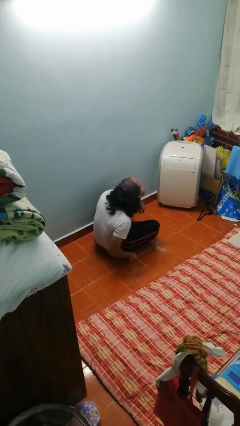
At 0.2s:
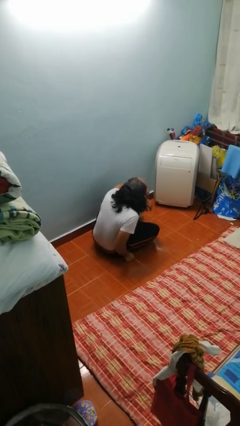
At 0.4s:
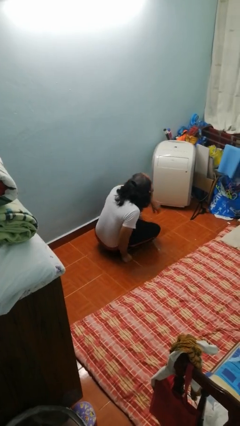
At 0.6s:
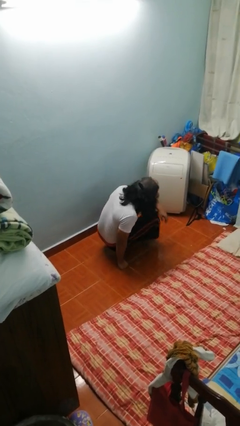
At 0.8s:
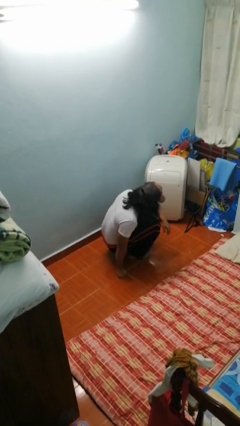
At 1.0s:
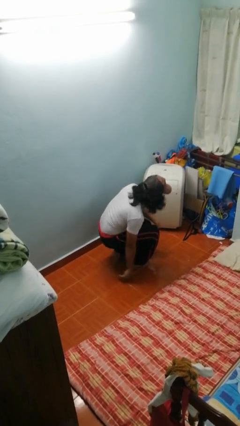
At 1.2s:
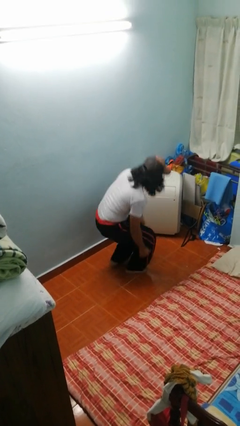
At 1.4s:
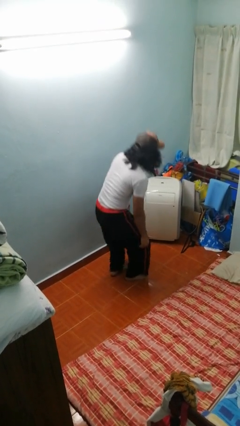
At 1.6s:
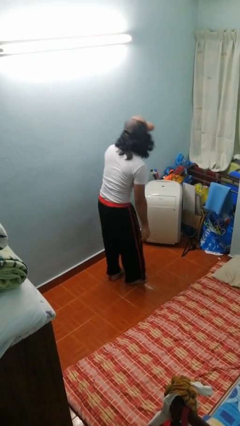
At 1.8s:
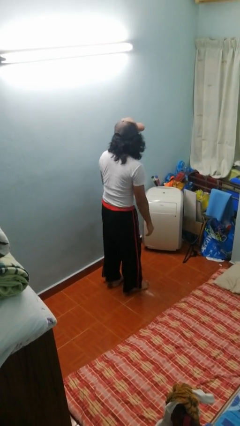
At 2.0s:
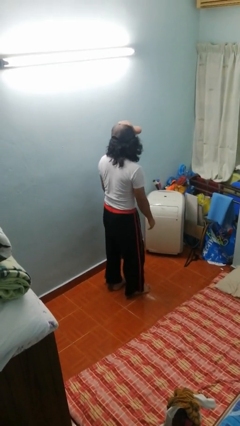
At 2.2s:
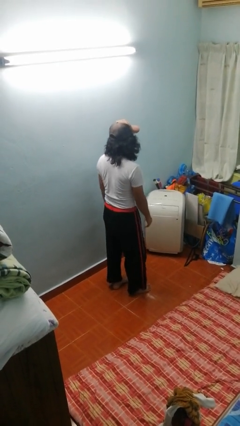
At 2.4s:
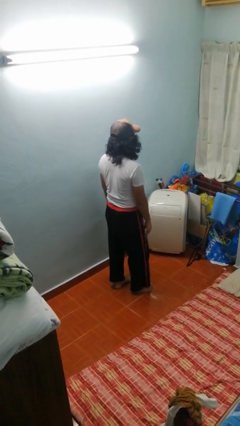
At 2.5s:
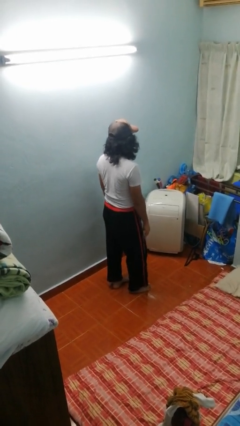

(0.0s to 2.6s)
person stands up from floor

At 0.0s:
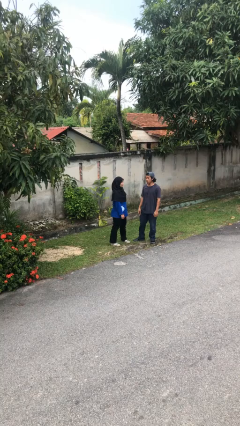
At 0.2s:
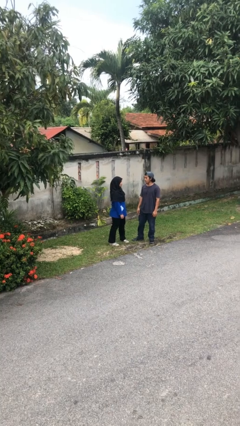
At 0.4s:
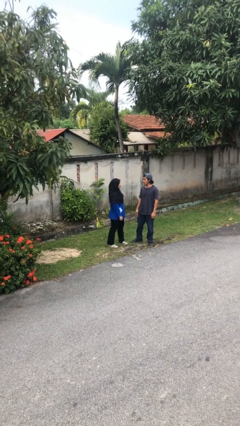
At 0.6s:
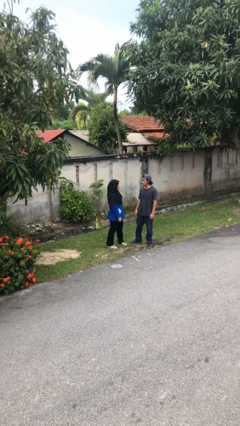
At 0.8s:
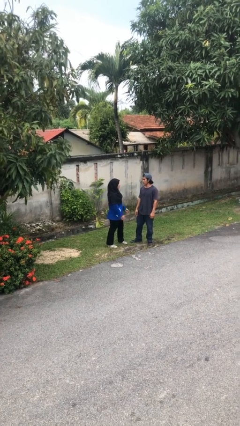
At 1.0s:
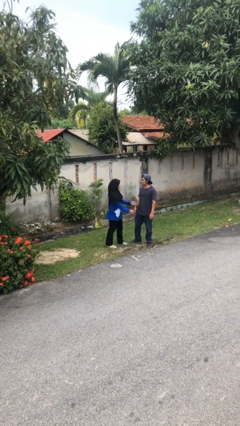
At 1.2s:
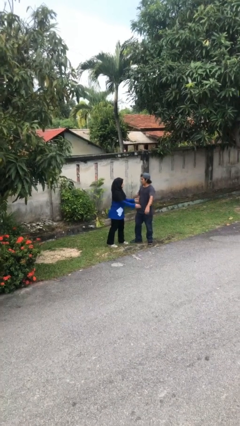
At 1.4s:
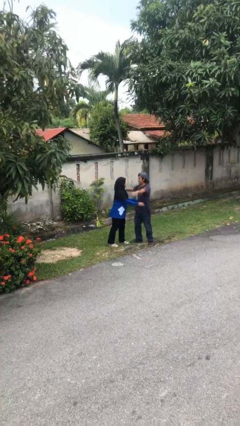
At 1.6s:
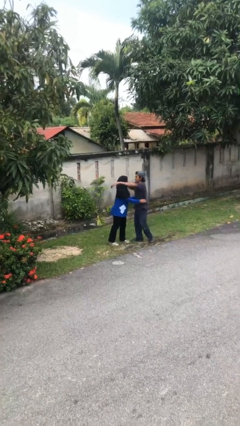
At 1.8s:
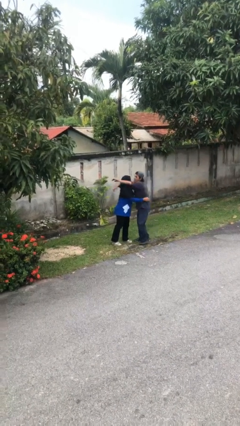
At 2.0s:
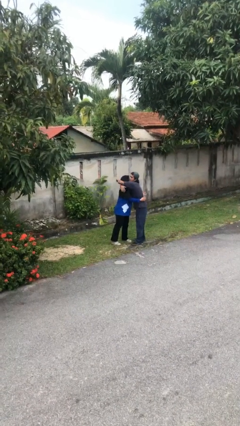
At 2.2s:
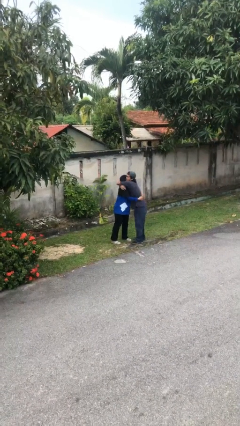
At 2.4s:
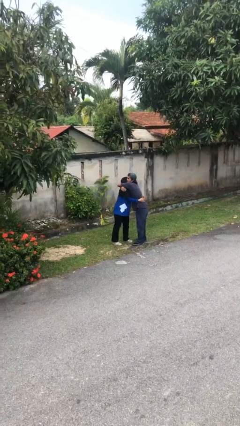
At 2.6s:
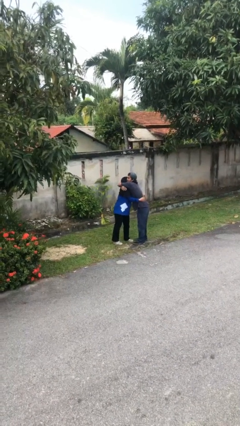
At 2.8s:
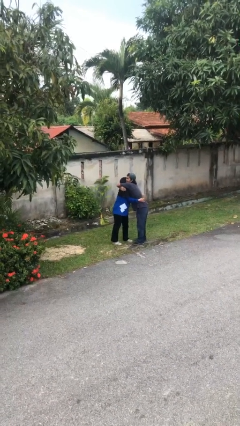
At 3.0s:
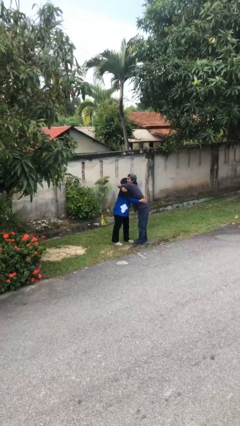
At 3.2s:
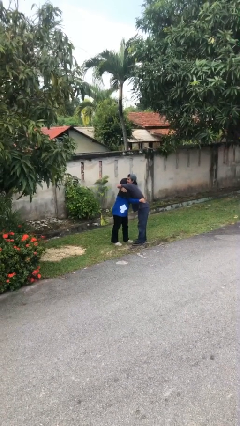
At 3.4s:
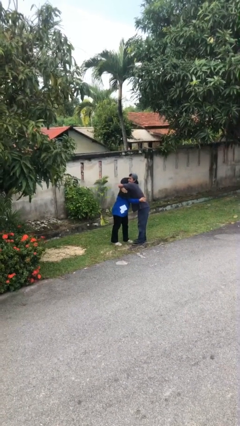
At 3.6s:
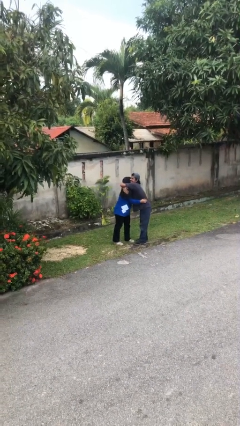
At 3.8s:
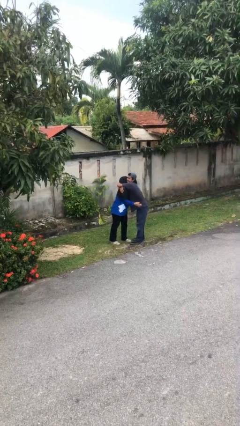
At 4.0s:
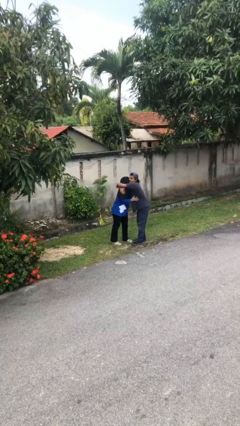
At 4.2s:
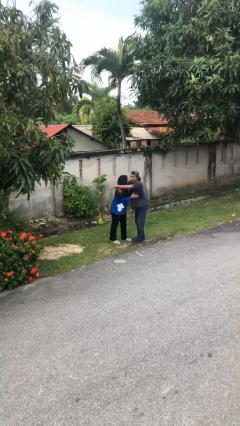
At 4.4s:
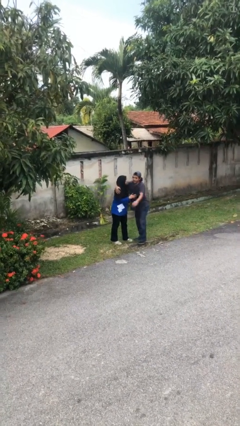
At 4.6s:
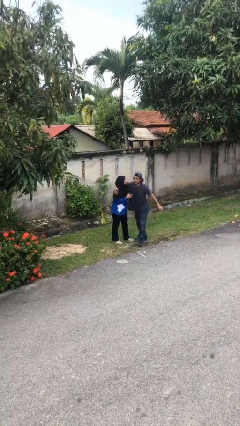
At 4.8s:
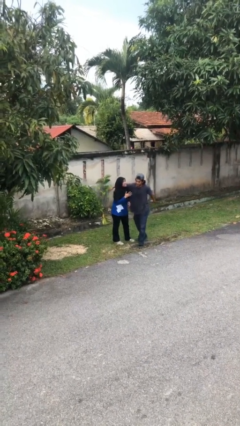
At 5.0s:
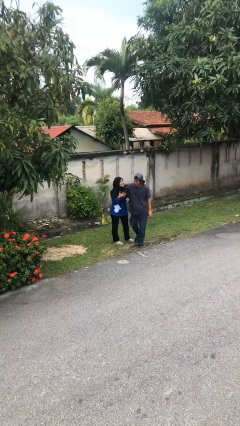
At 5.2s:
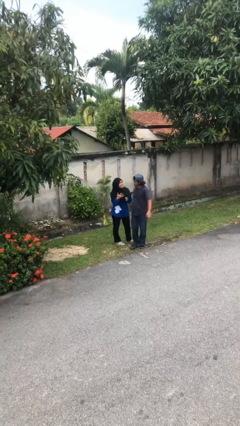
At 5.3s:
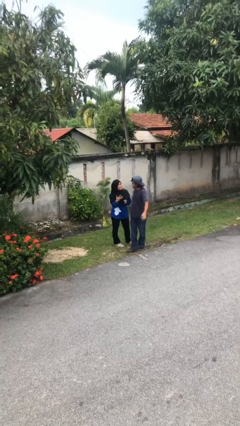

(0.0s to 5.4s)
person embraces person

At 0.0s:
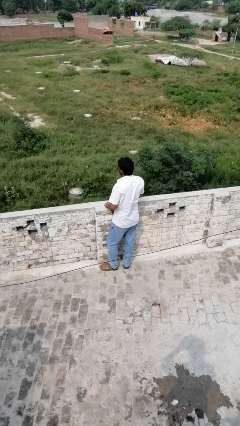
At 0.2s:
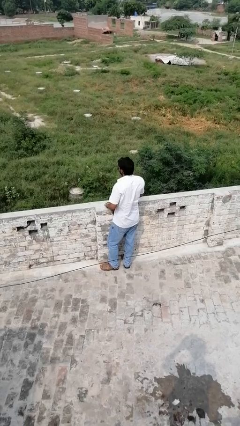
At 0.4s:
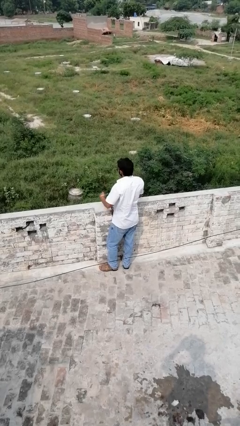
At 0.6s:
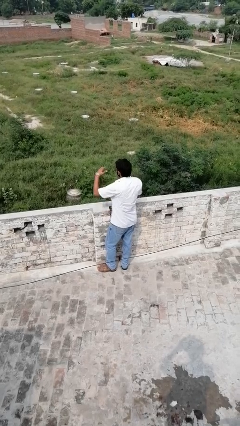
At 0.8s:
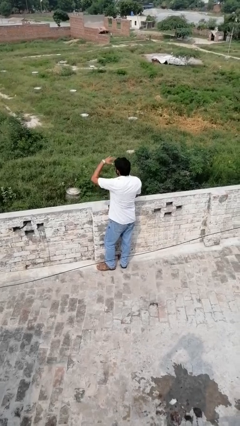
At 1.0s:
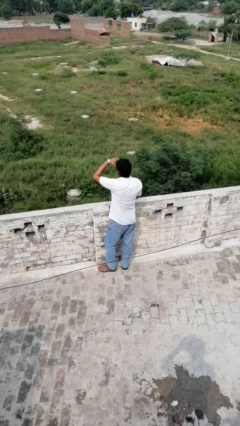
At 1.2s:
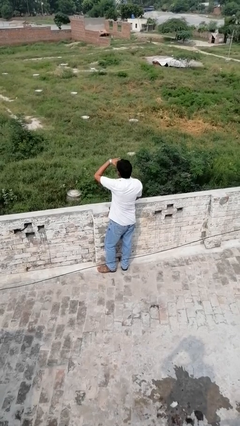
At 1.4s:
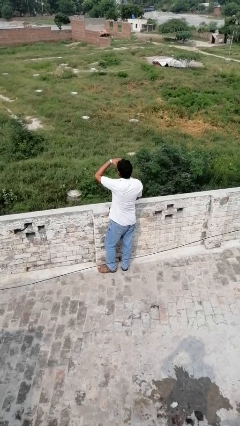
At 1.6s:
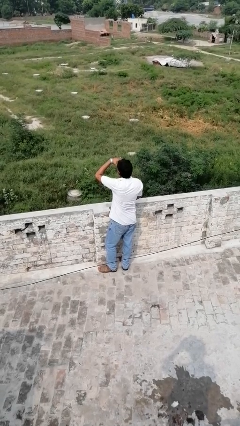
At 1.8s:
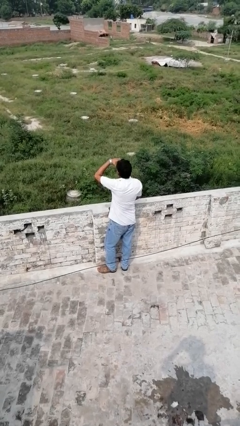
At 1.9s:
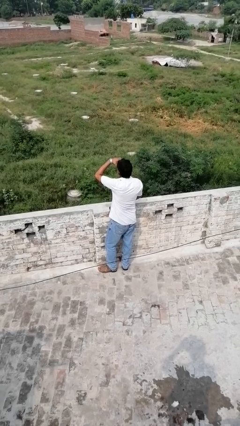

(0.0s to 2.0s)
person shades eyes

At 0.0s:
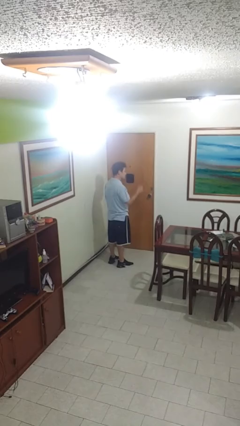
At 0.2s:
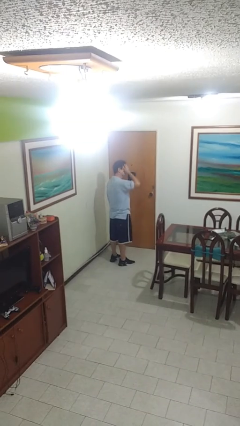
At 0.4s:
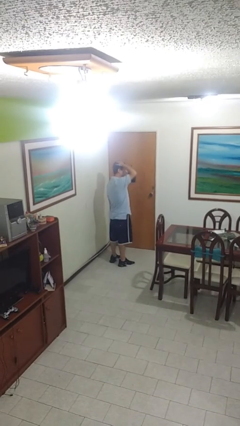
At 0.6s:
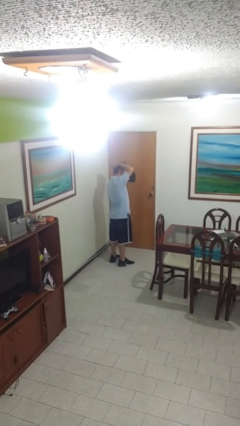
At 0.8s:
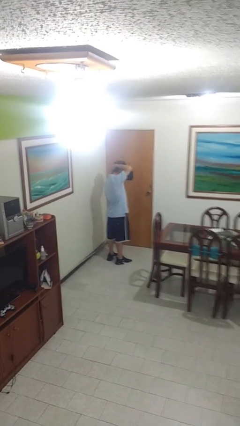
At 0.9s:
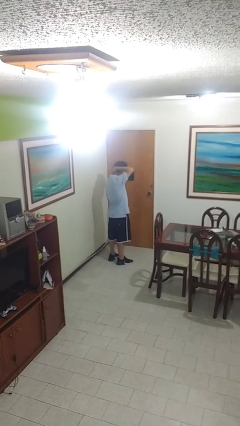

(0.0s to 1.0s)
person strokes hair

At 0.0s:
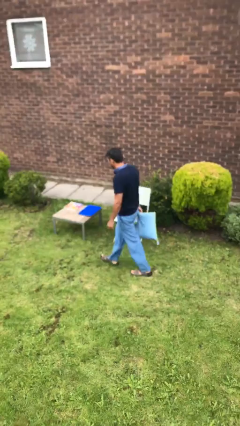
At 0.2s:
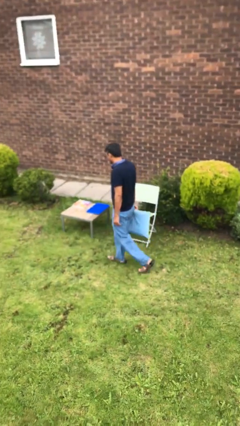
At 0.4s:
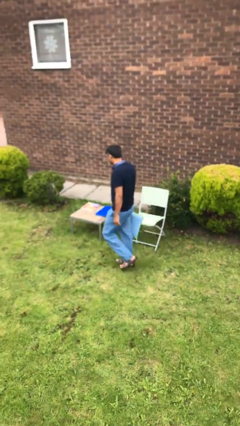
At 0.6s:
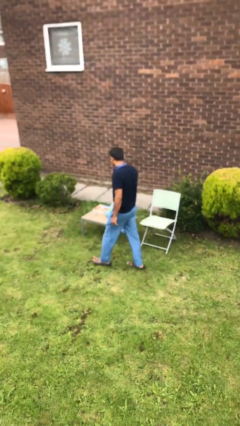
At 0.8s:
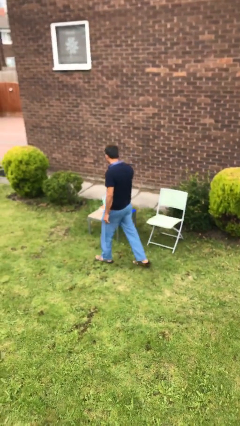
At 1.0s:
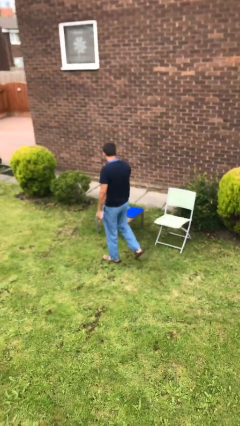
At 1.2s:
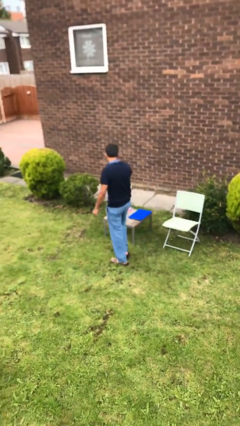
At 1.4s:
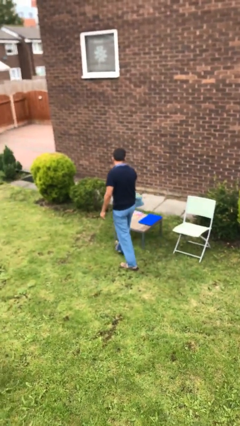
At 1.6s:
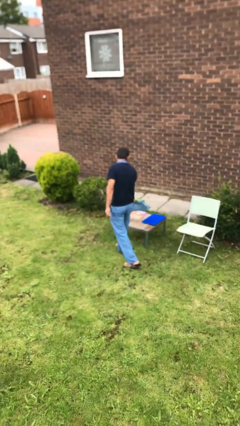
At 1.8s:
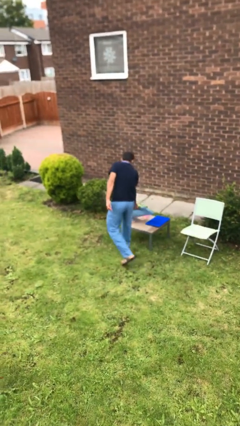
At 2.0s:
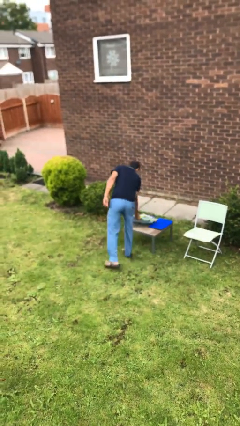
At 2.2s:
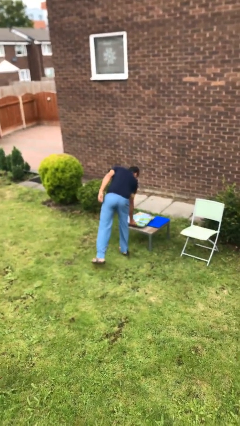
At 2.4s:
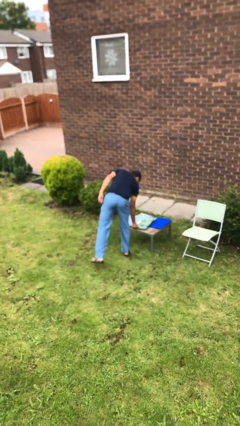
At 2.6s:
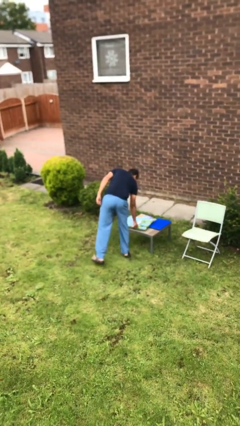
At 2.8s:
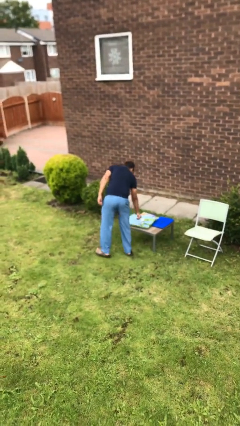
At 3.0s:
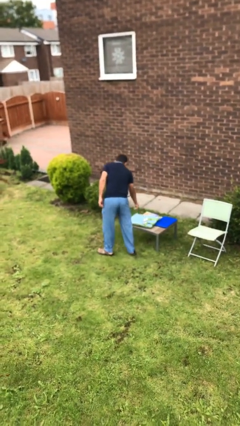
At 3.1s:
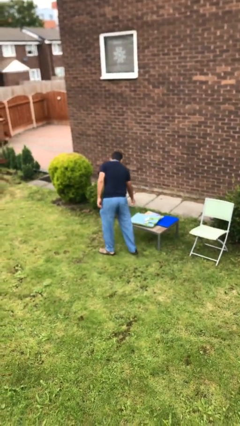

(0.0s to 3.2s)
person puts down object on table

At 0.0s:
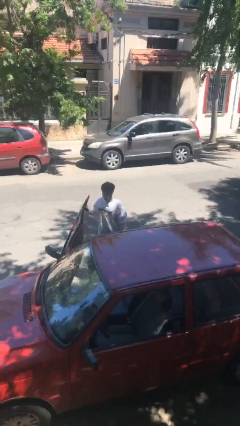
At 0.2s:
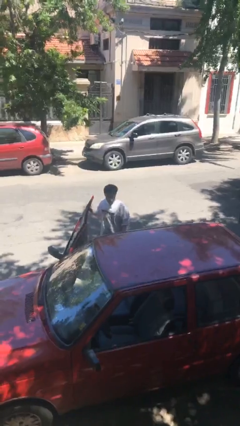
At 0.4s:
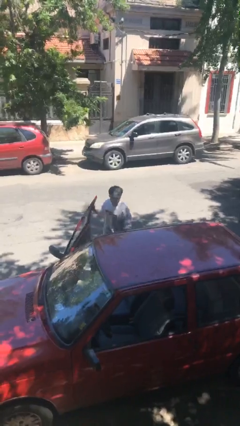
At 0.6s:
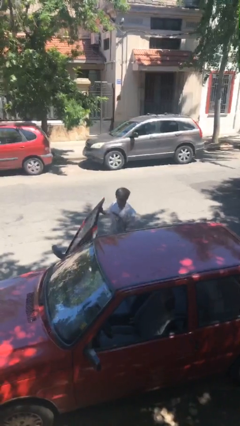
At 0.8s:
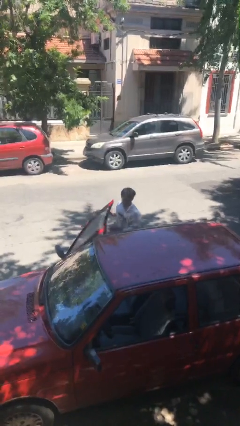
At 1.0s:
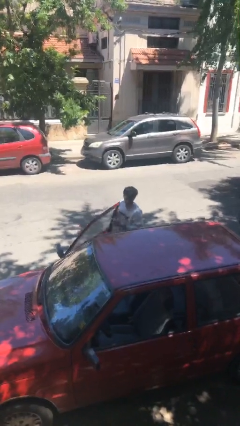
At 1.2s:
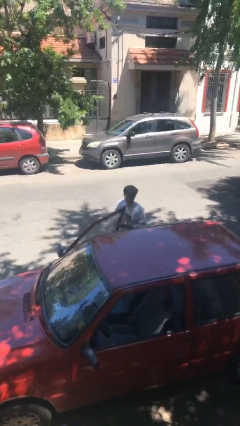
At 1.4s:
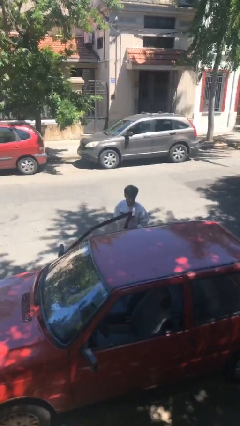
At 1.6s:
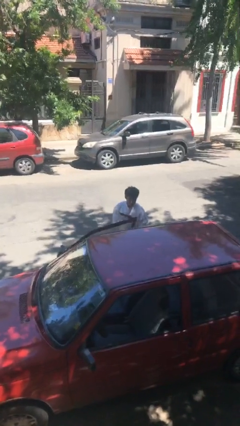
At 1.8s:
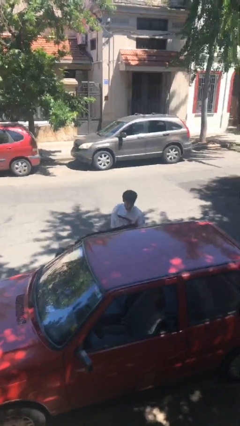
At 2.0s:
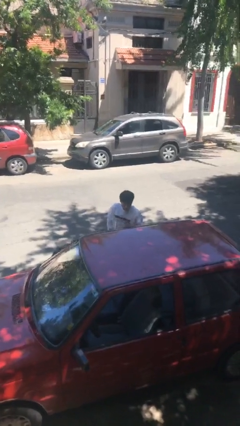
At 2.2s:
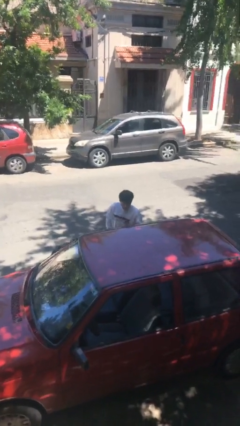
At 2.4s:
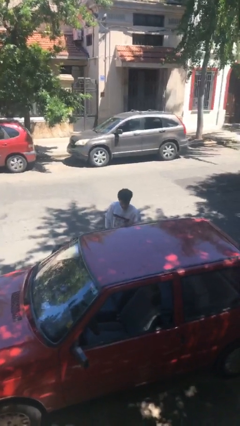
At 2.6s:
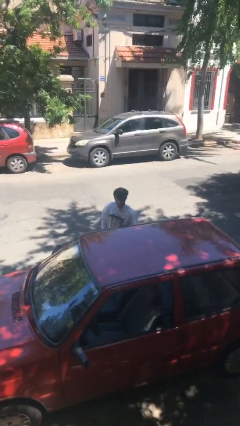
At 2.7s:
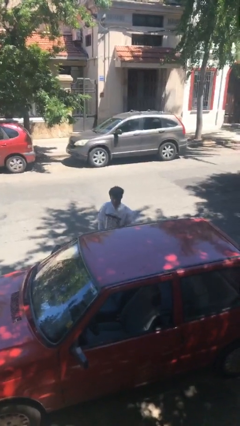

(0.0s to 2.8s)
person closes car door

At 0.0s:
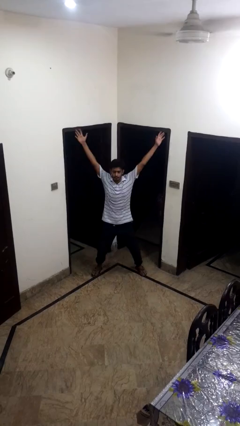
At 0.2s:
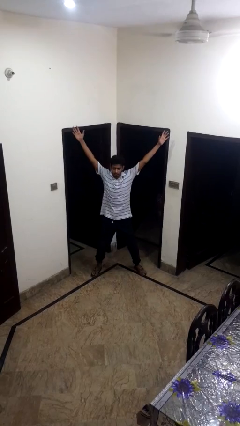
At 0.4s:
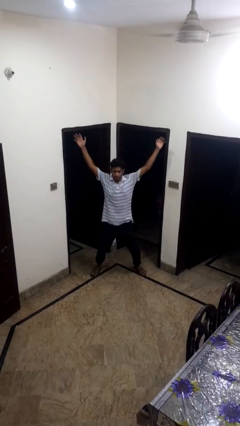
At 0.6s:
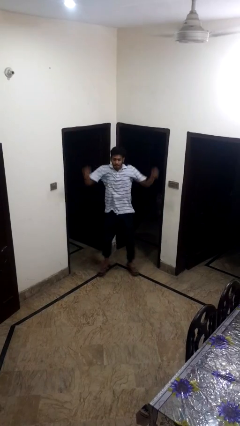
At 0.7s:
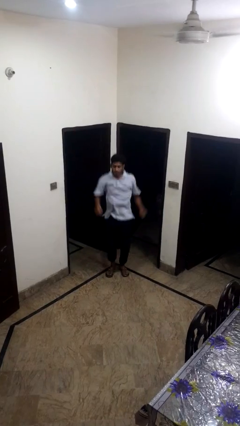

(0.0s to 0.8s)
person exercises with jumping jacks
